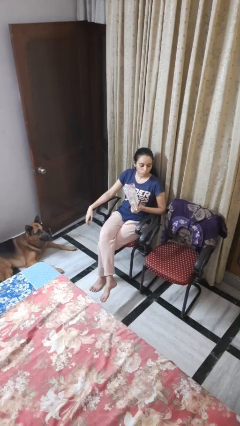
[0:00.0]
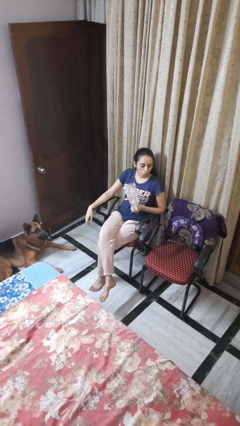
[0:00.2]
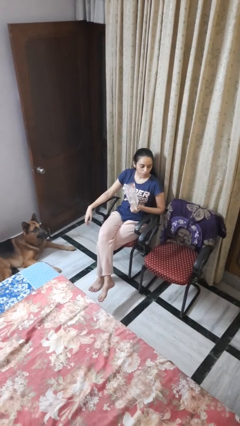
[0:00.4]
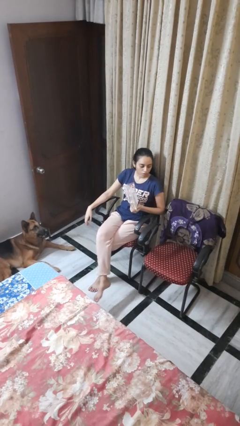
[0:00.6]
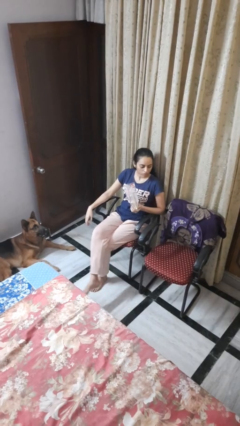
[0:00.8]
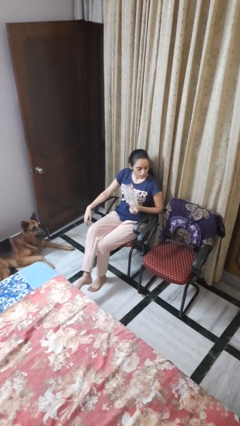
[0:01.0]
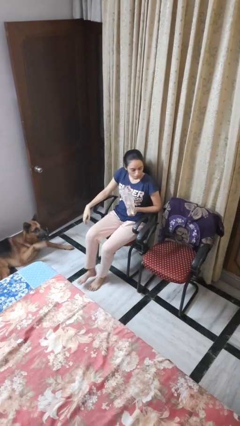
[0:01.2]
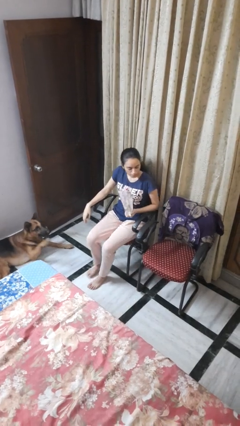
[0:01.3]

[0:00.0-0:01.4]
person eats snack from bag

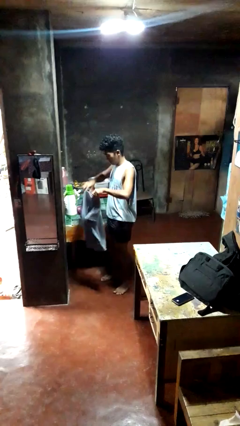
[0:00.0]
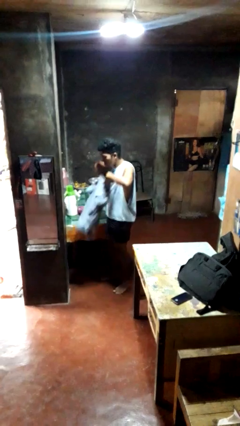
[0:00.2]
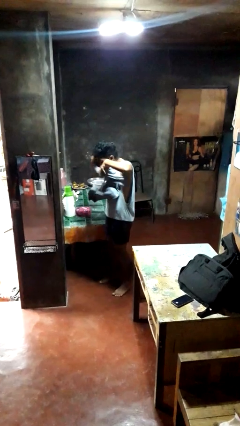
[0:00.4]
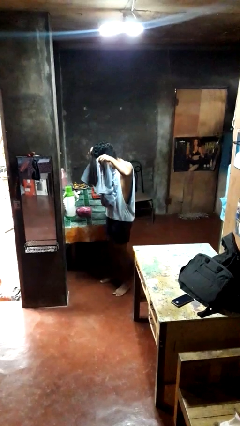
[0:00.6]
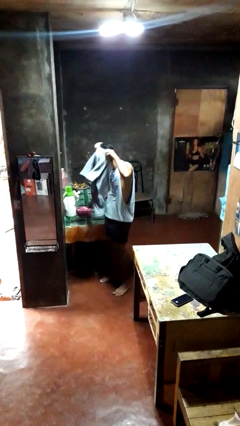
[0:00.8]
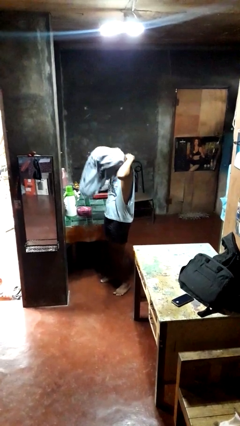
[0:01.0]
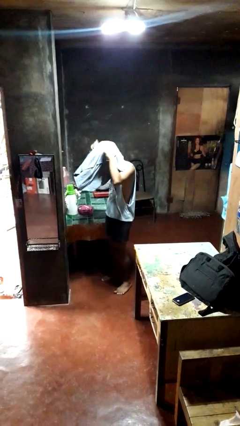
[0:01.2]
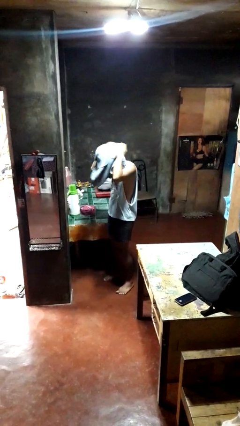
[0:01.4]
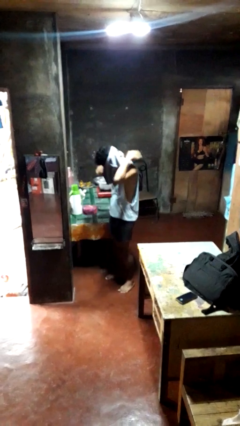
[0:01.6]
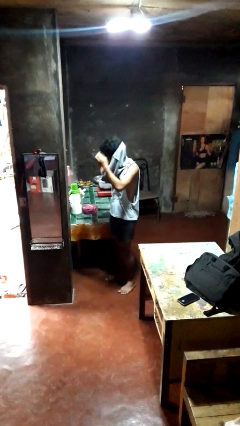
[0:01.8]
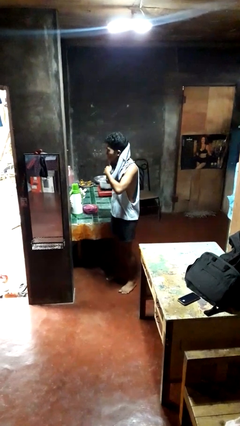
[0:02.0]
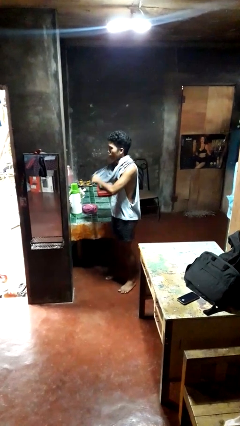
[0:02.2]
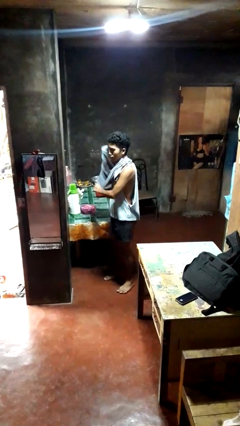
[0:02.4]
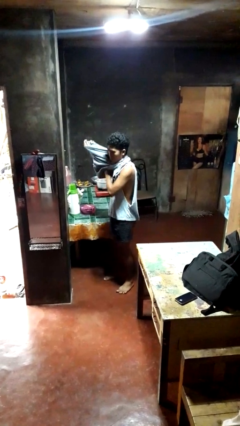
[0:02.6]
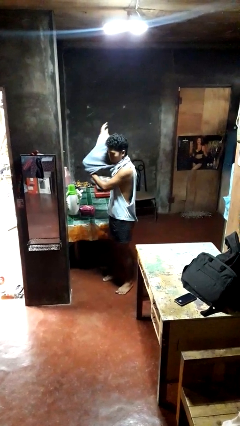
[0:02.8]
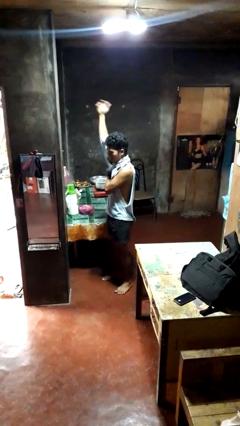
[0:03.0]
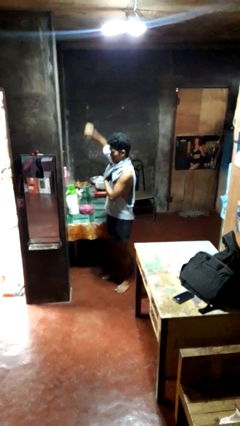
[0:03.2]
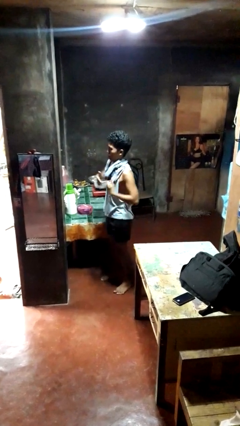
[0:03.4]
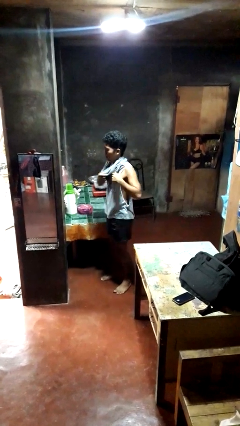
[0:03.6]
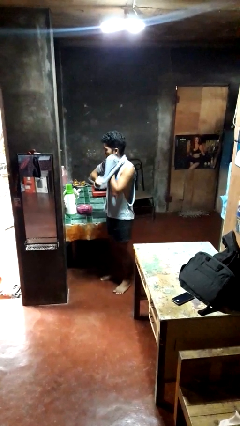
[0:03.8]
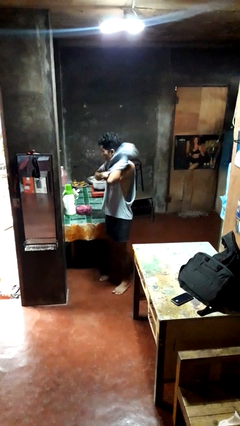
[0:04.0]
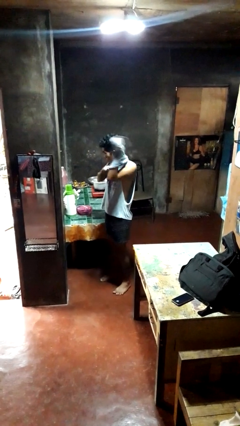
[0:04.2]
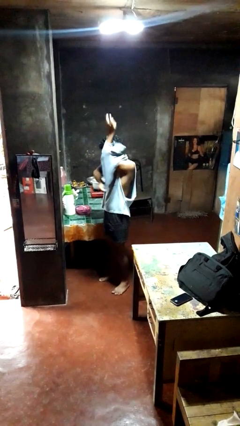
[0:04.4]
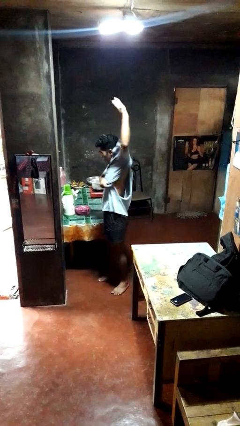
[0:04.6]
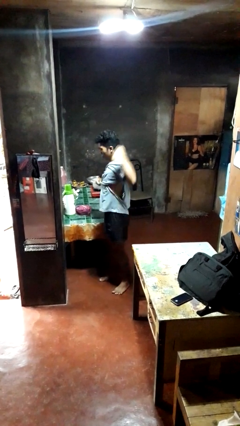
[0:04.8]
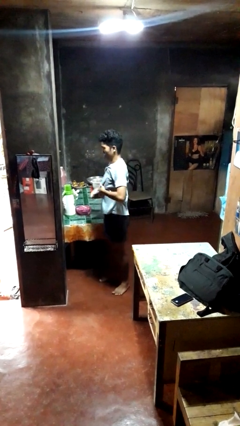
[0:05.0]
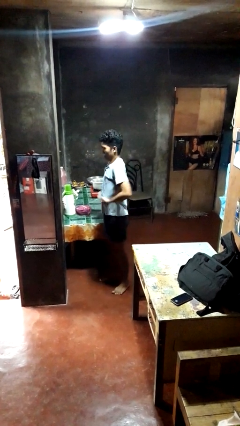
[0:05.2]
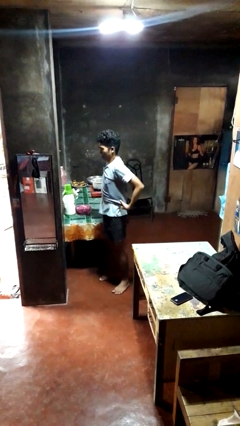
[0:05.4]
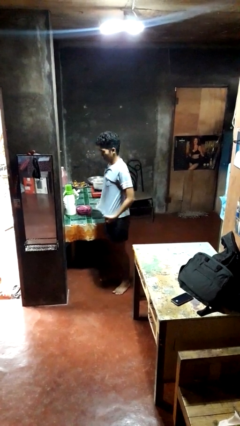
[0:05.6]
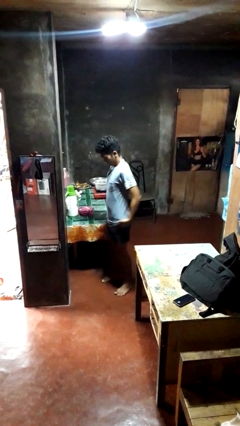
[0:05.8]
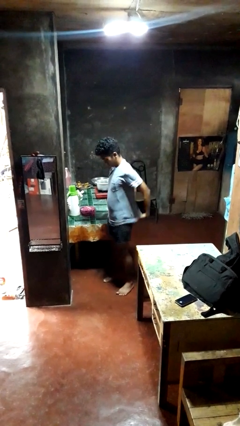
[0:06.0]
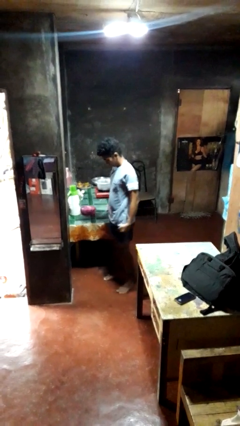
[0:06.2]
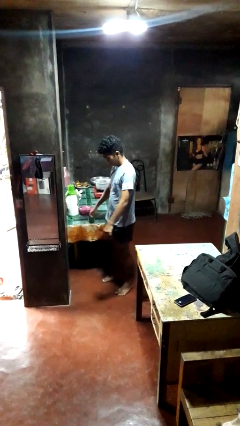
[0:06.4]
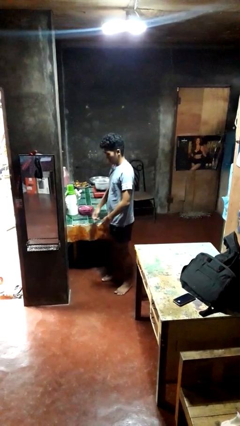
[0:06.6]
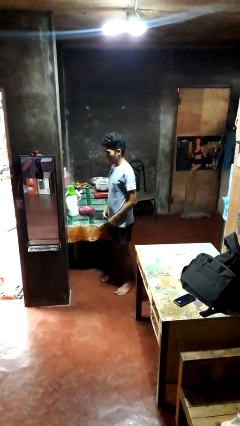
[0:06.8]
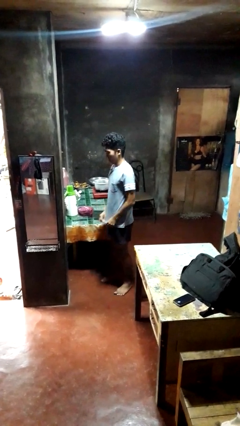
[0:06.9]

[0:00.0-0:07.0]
person puts on shirt

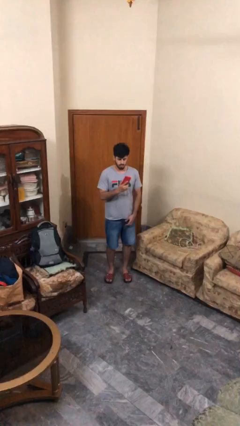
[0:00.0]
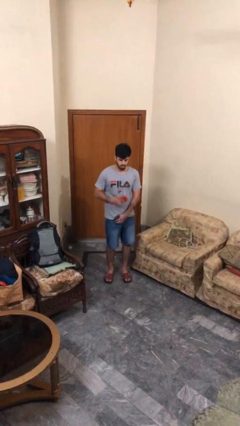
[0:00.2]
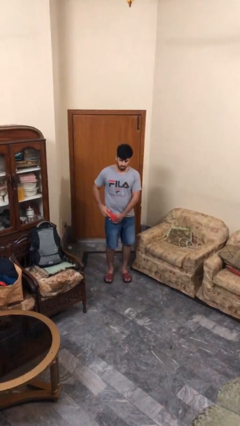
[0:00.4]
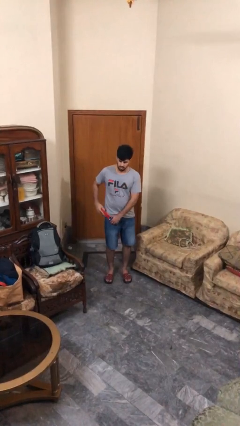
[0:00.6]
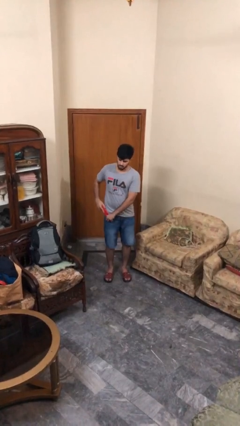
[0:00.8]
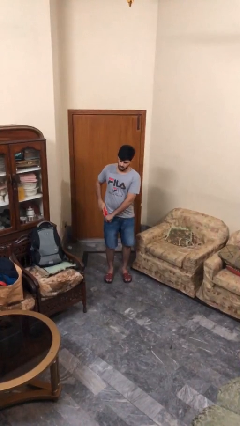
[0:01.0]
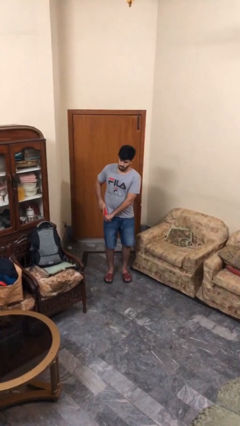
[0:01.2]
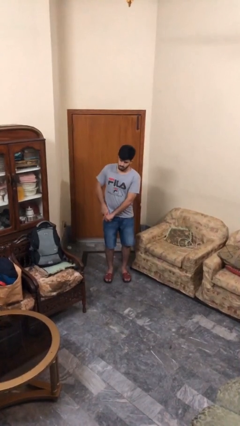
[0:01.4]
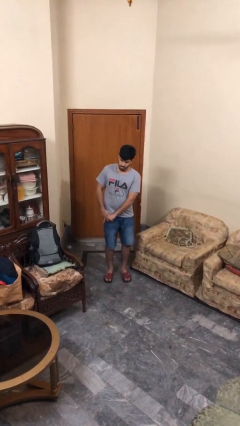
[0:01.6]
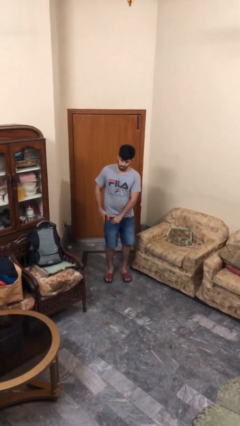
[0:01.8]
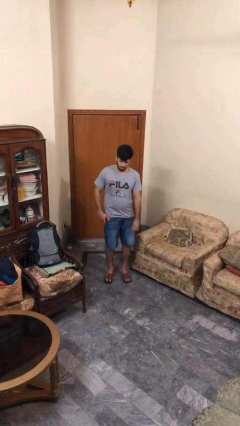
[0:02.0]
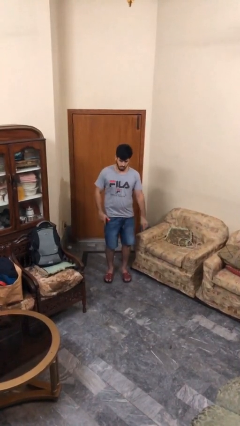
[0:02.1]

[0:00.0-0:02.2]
person puts phone into pocket

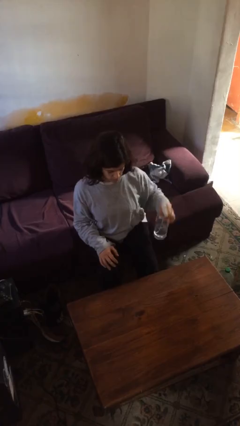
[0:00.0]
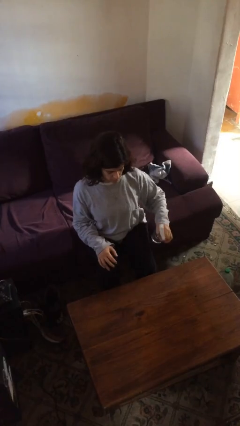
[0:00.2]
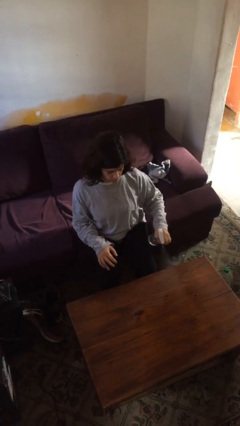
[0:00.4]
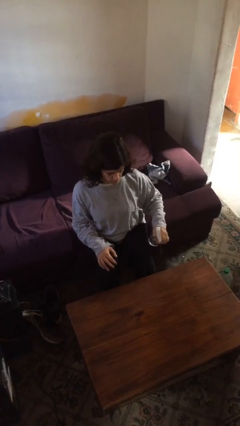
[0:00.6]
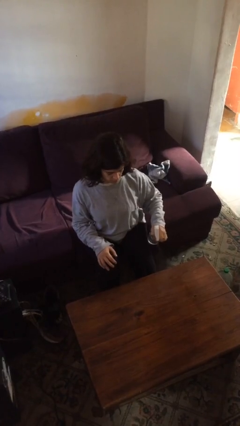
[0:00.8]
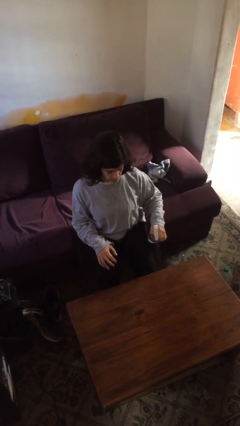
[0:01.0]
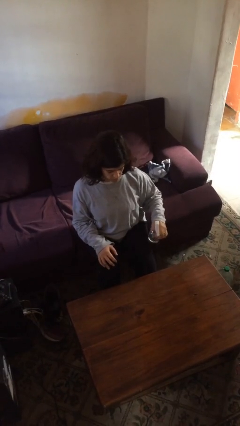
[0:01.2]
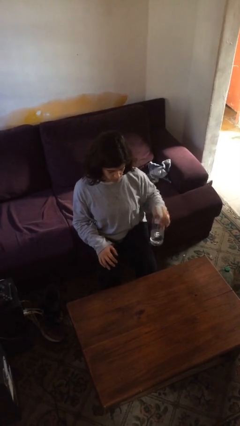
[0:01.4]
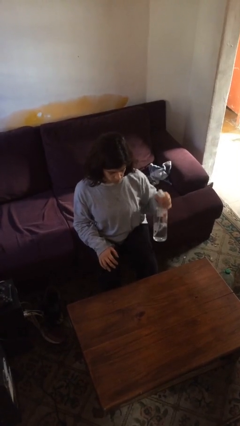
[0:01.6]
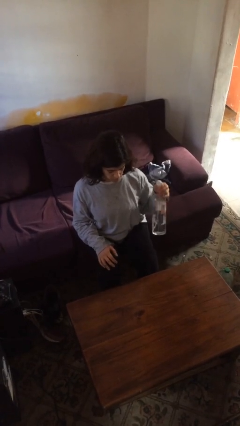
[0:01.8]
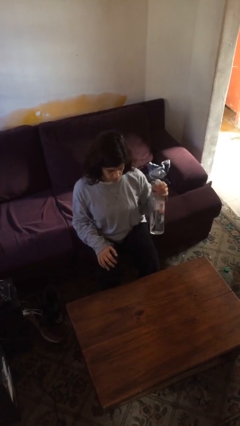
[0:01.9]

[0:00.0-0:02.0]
person sprays from bottle

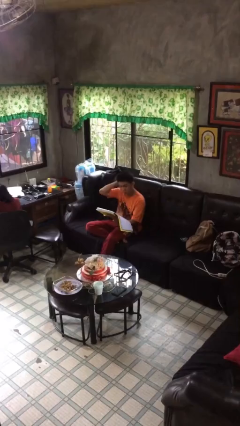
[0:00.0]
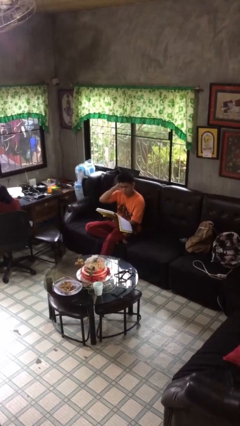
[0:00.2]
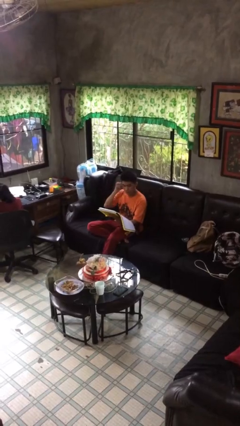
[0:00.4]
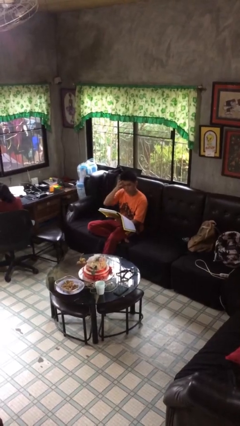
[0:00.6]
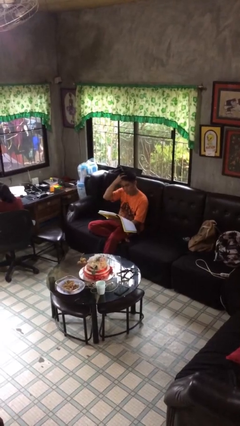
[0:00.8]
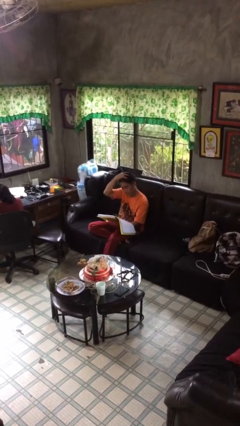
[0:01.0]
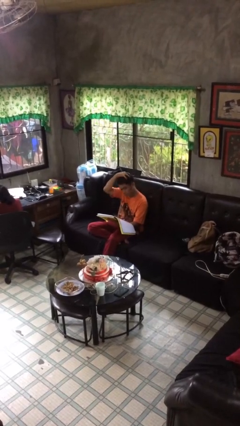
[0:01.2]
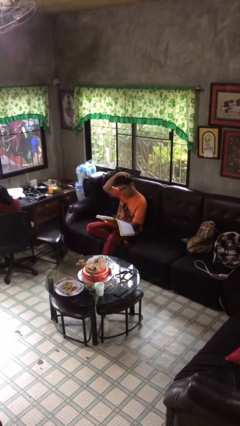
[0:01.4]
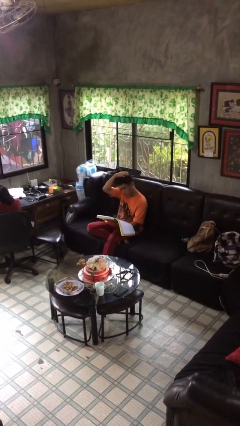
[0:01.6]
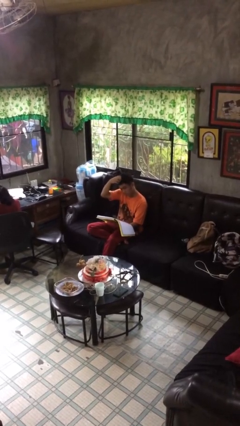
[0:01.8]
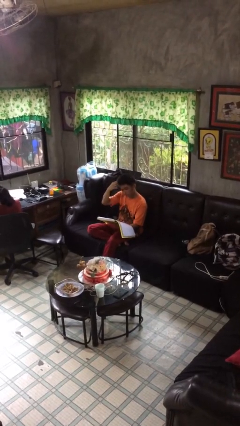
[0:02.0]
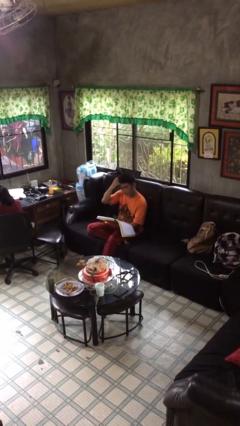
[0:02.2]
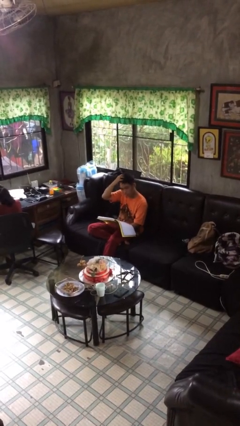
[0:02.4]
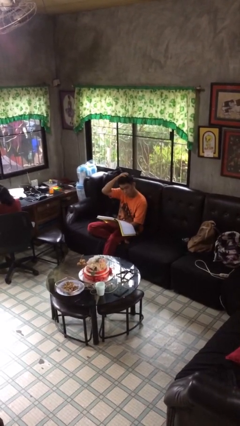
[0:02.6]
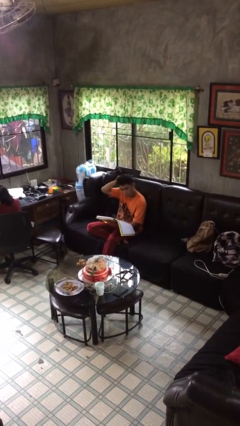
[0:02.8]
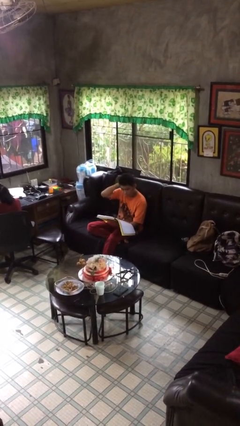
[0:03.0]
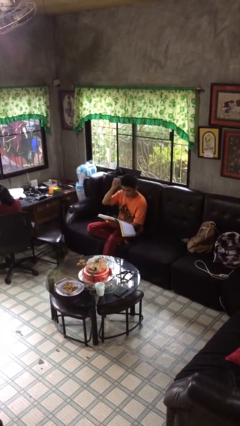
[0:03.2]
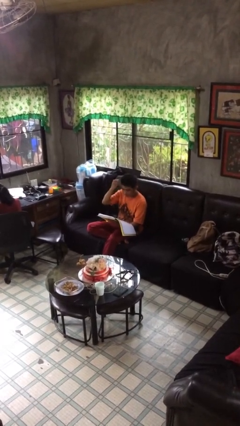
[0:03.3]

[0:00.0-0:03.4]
person reads document

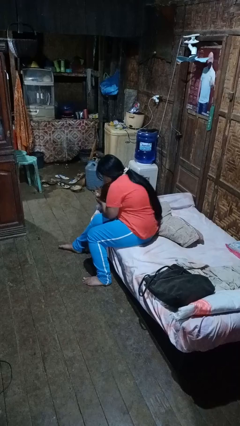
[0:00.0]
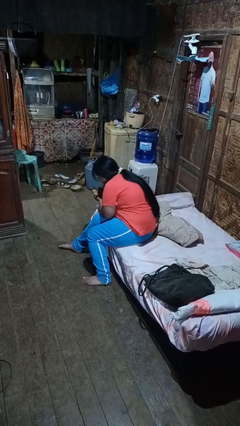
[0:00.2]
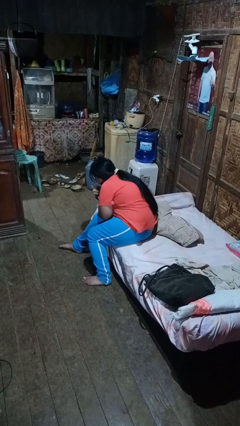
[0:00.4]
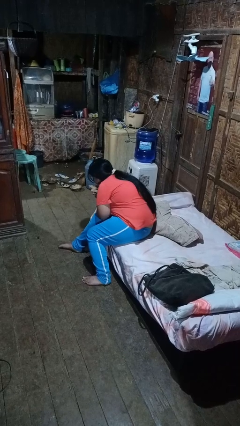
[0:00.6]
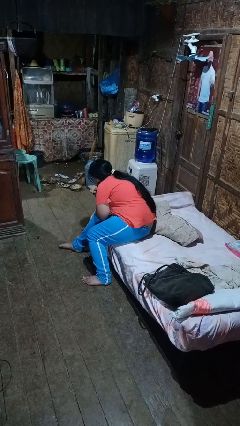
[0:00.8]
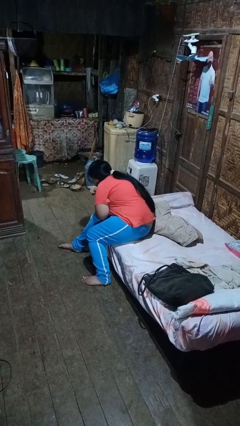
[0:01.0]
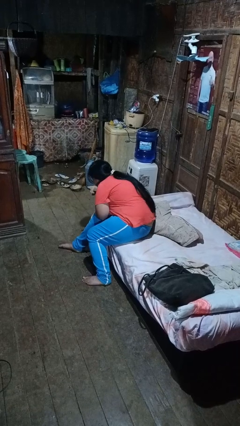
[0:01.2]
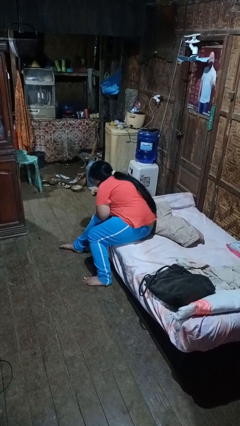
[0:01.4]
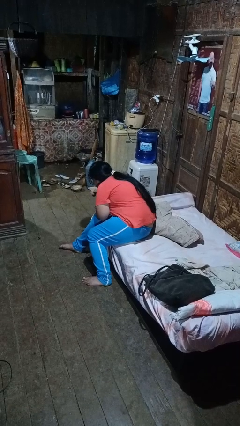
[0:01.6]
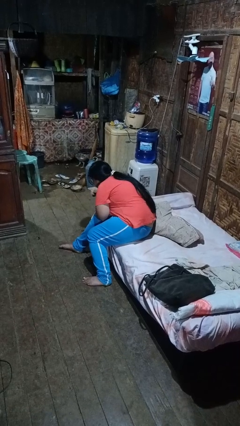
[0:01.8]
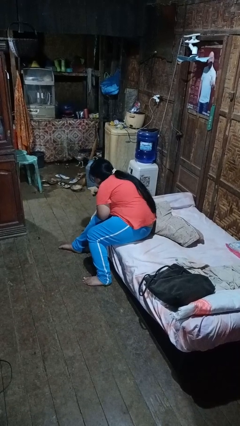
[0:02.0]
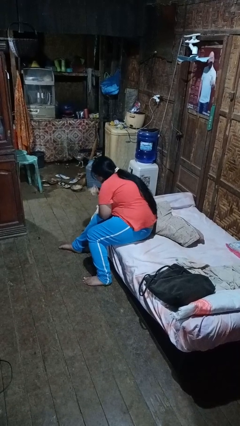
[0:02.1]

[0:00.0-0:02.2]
person hugs cat
